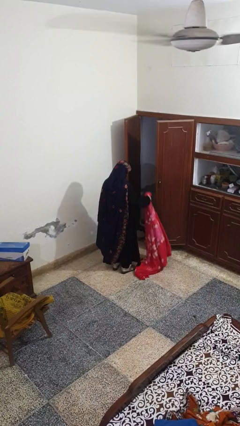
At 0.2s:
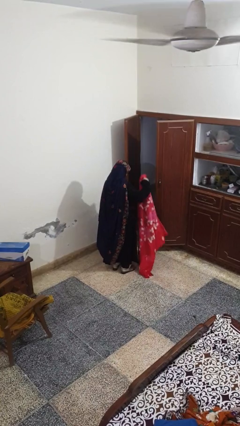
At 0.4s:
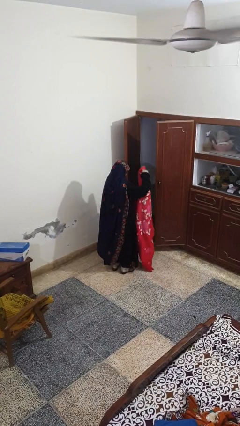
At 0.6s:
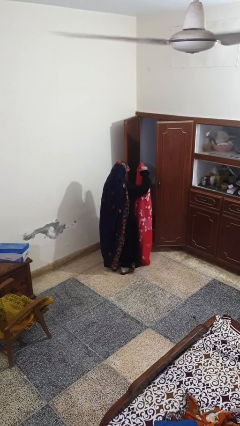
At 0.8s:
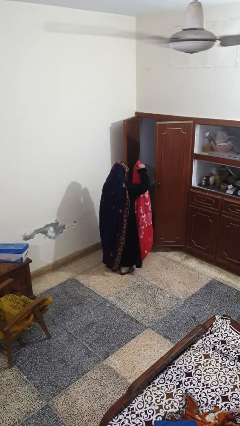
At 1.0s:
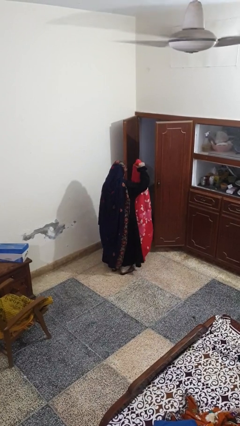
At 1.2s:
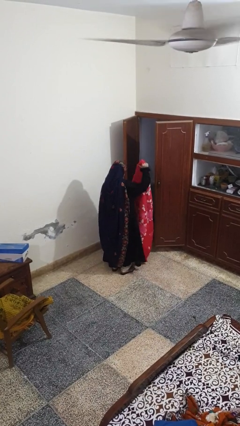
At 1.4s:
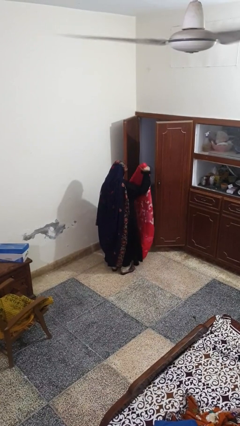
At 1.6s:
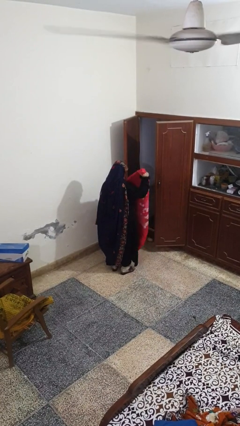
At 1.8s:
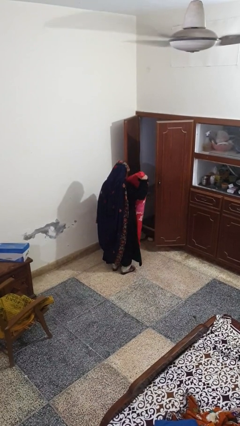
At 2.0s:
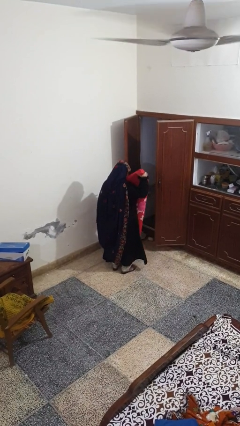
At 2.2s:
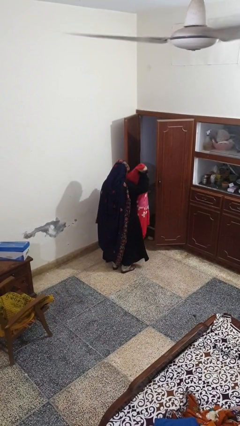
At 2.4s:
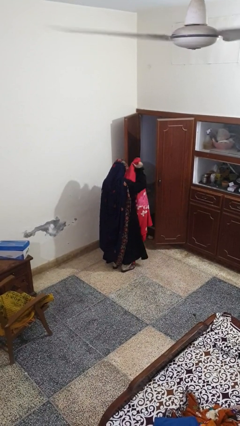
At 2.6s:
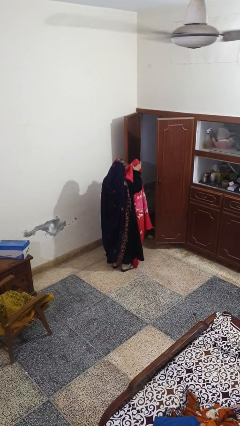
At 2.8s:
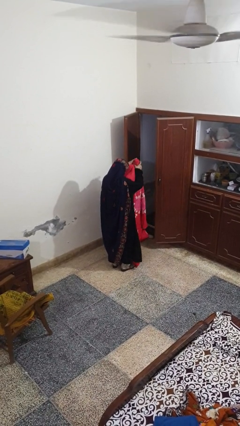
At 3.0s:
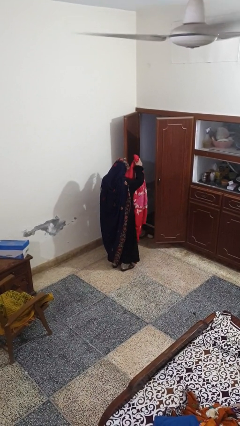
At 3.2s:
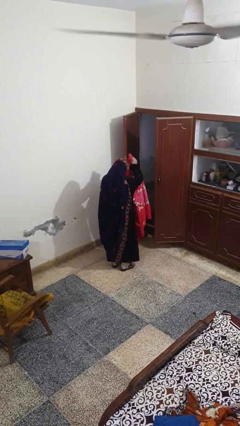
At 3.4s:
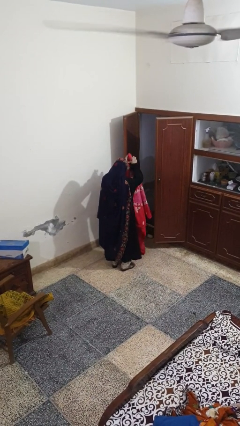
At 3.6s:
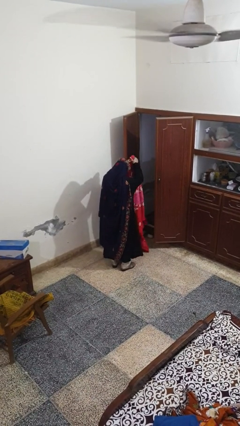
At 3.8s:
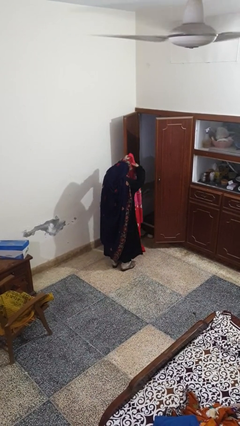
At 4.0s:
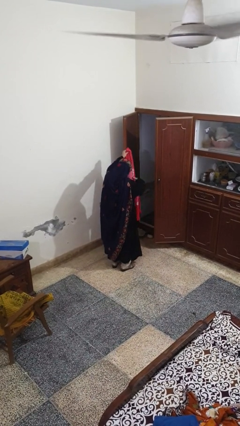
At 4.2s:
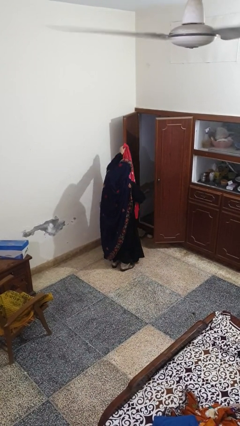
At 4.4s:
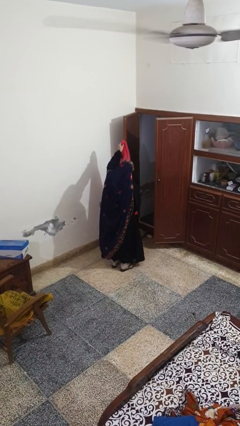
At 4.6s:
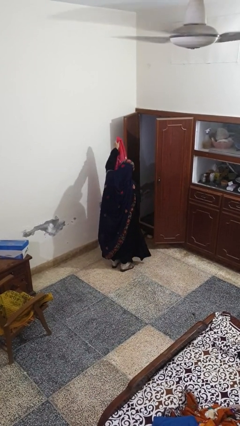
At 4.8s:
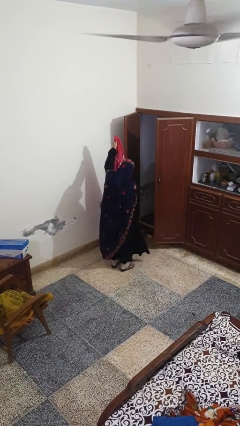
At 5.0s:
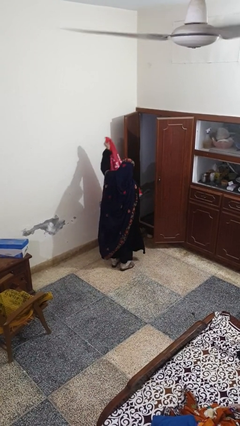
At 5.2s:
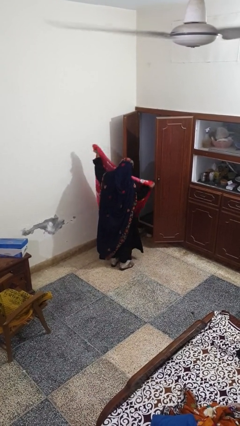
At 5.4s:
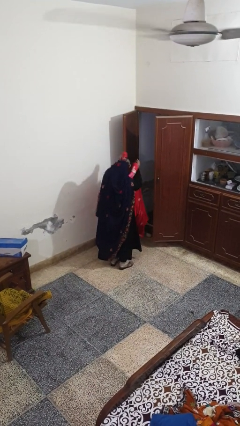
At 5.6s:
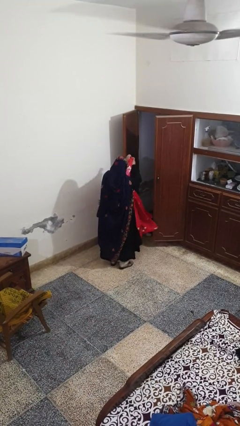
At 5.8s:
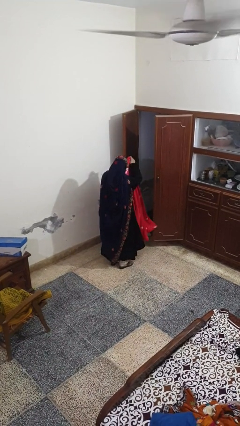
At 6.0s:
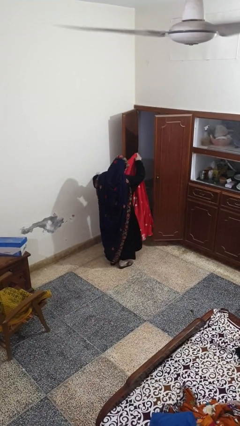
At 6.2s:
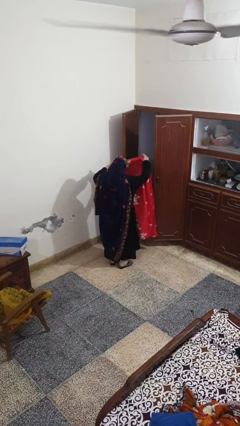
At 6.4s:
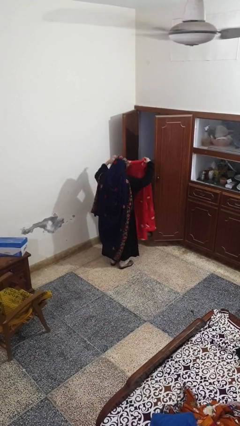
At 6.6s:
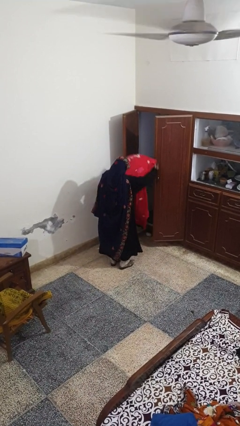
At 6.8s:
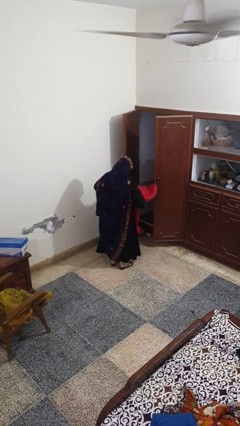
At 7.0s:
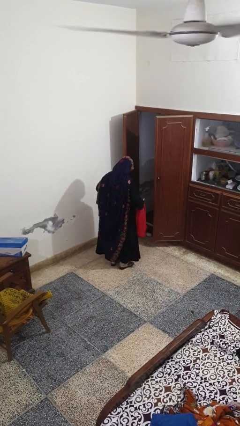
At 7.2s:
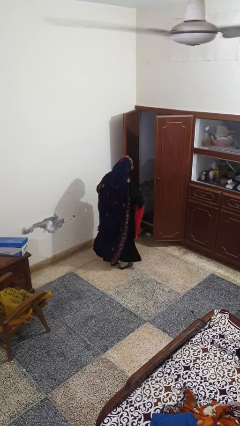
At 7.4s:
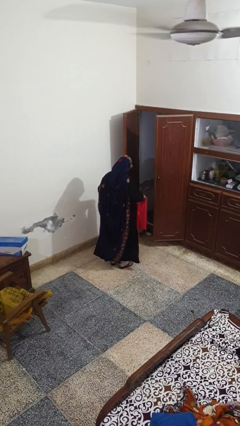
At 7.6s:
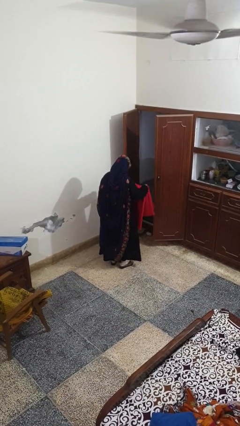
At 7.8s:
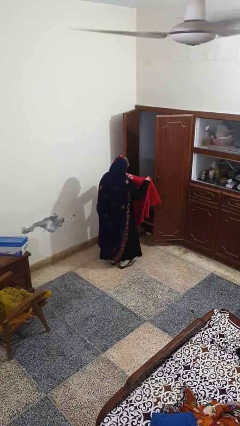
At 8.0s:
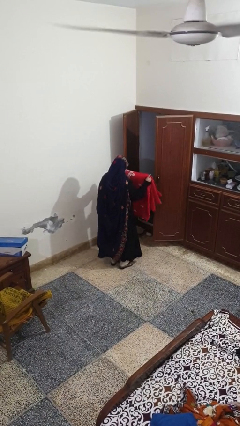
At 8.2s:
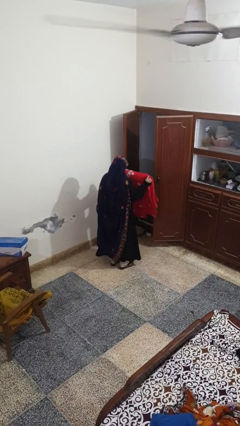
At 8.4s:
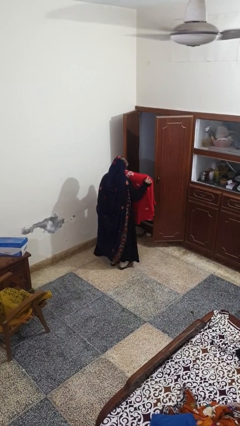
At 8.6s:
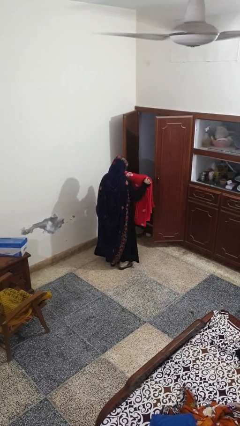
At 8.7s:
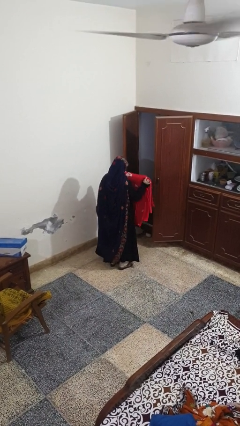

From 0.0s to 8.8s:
person folds blanket

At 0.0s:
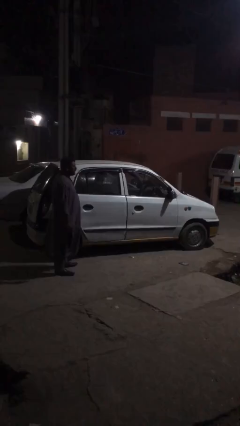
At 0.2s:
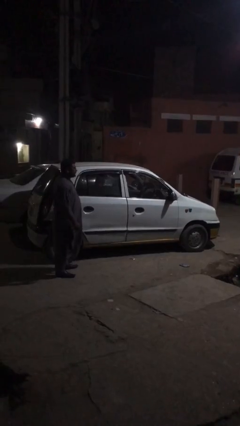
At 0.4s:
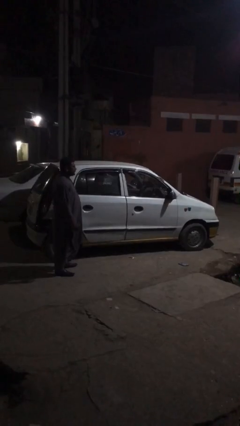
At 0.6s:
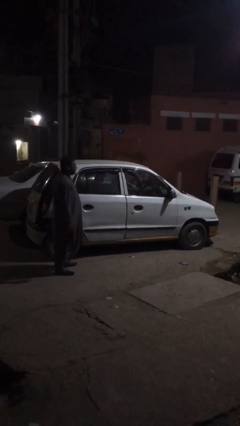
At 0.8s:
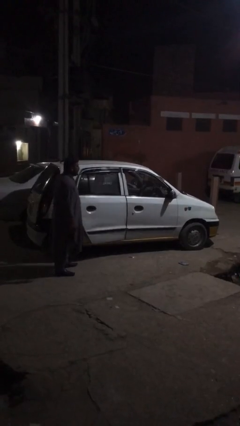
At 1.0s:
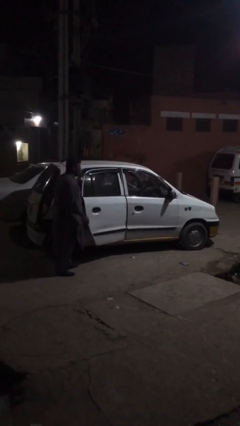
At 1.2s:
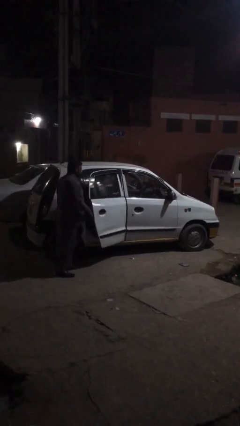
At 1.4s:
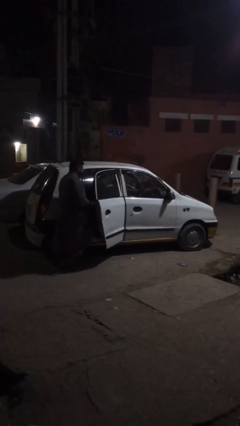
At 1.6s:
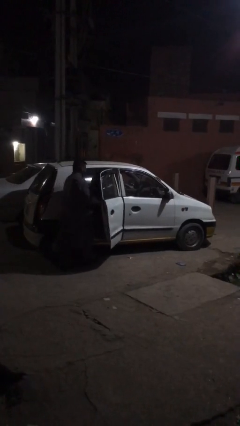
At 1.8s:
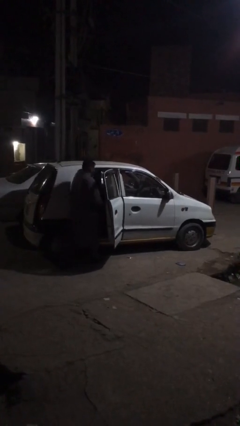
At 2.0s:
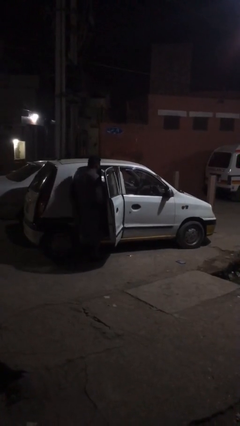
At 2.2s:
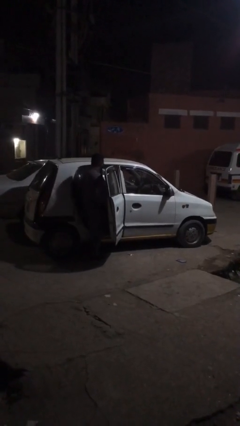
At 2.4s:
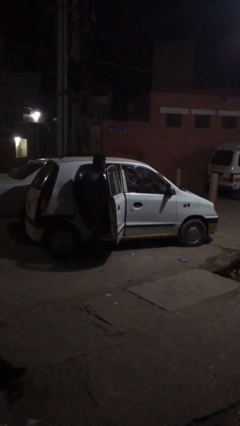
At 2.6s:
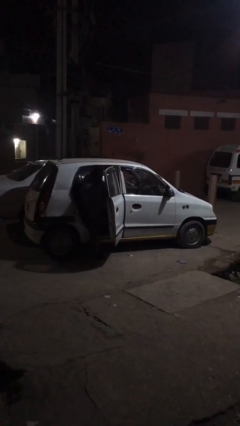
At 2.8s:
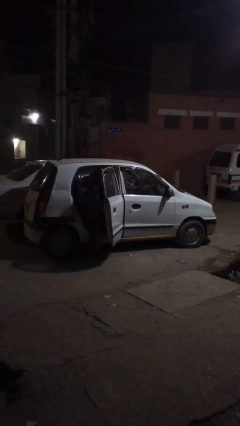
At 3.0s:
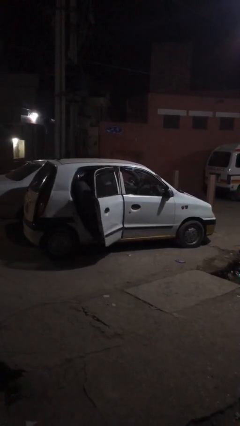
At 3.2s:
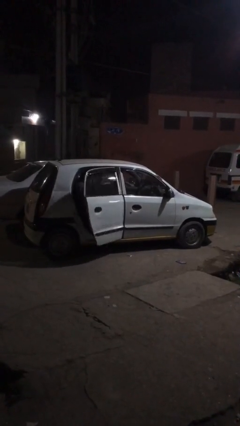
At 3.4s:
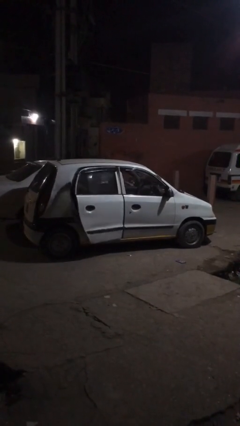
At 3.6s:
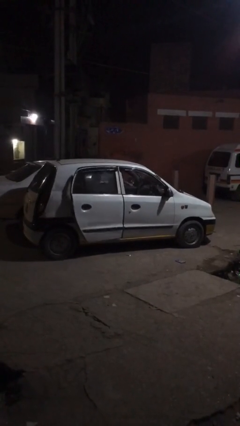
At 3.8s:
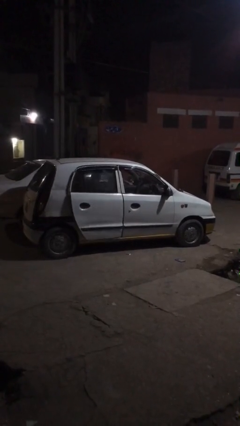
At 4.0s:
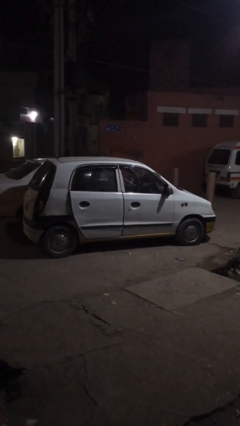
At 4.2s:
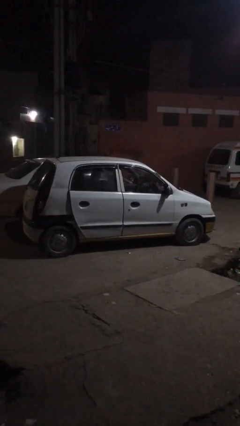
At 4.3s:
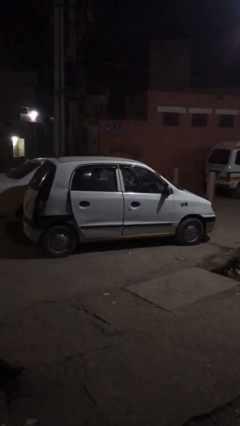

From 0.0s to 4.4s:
car picks up person

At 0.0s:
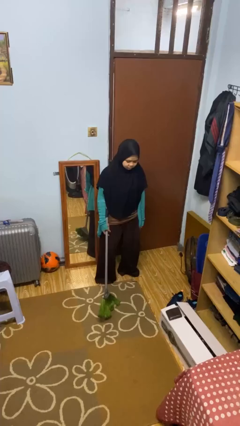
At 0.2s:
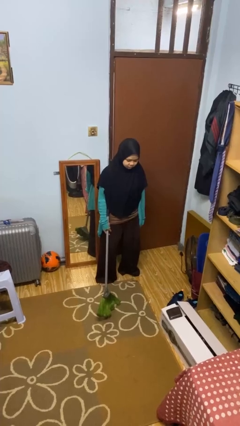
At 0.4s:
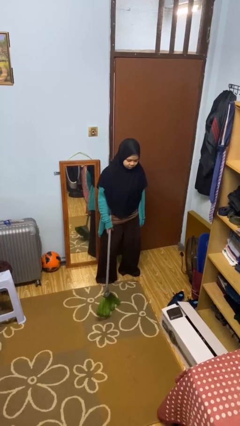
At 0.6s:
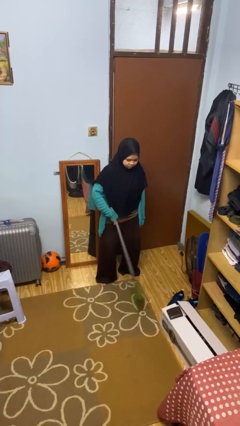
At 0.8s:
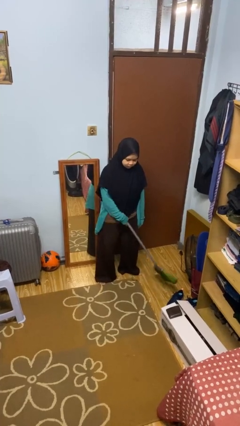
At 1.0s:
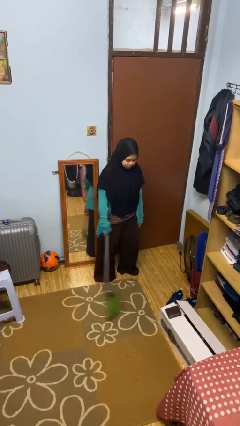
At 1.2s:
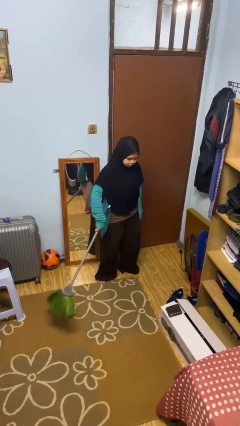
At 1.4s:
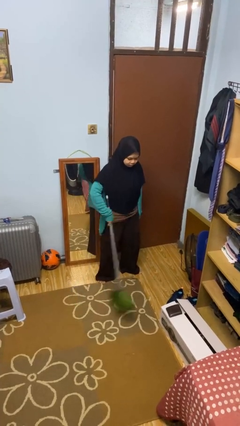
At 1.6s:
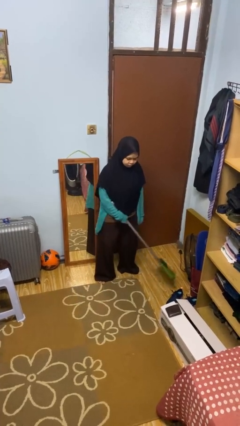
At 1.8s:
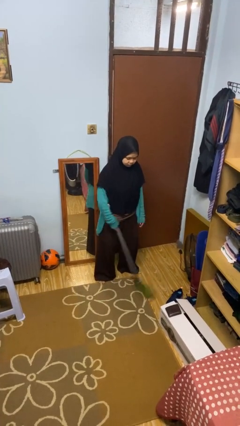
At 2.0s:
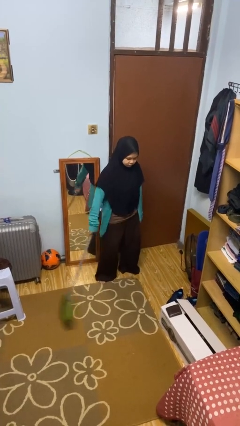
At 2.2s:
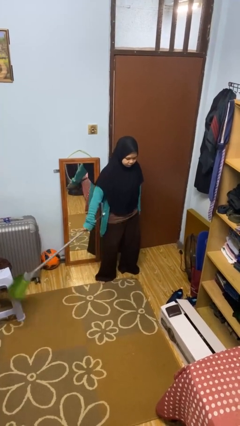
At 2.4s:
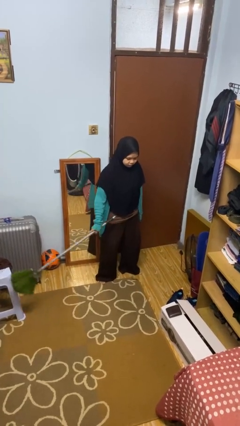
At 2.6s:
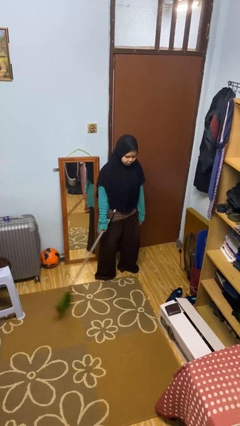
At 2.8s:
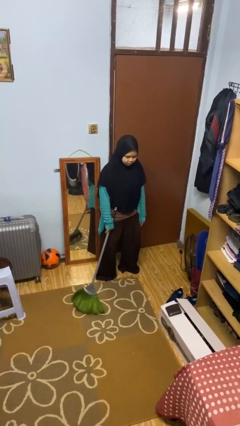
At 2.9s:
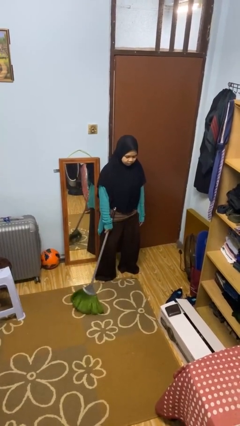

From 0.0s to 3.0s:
person sweeps floor

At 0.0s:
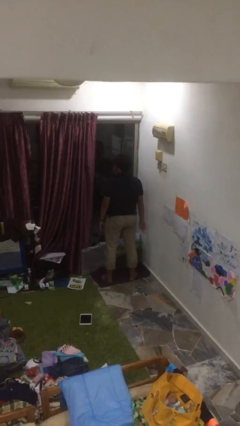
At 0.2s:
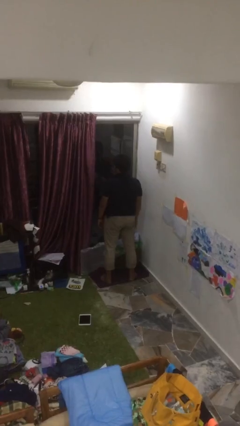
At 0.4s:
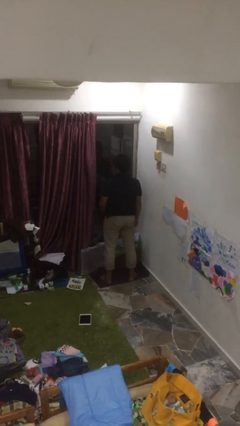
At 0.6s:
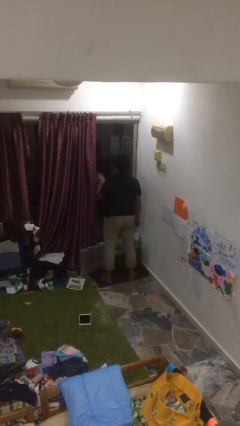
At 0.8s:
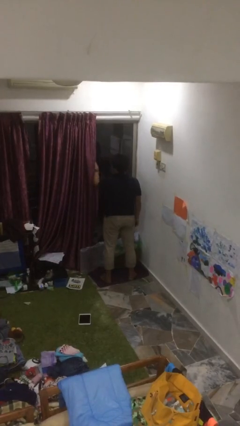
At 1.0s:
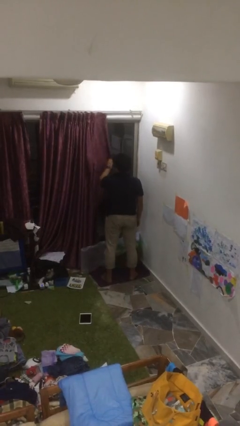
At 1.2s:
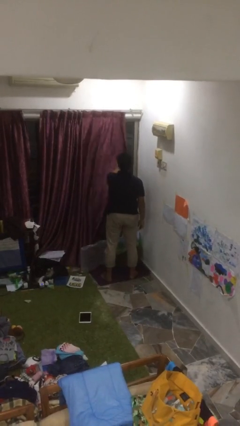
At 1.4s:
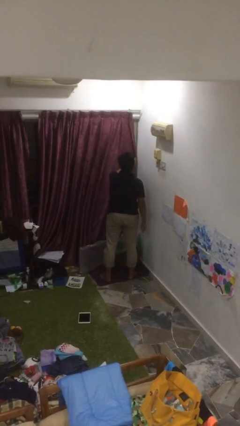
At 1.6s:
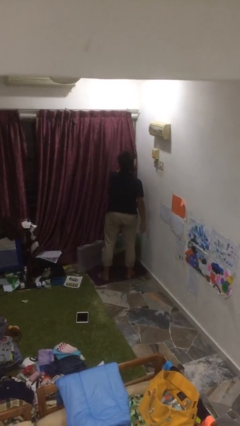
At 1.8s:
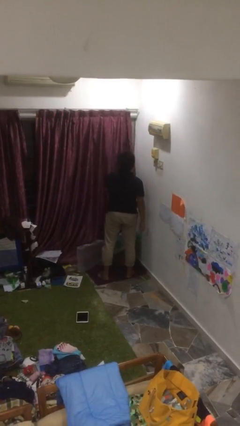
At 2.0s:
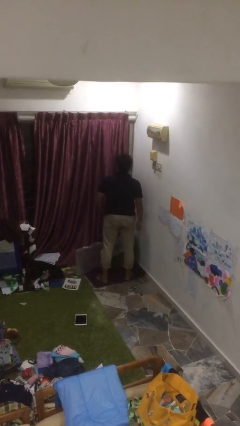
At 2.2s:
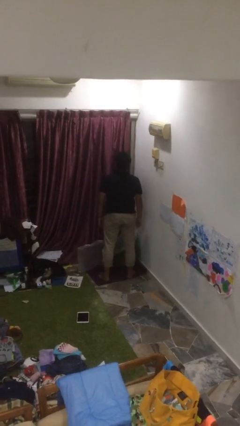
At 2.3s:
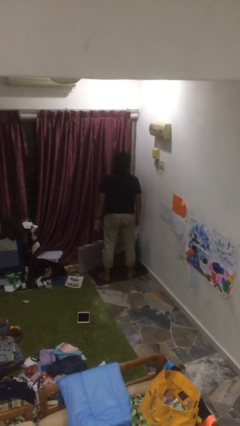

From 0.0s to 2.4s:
person closes curtains
